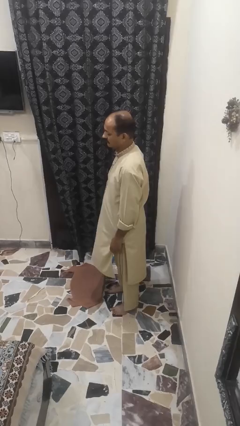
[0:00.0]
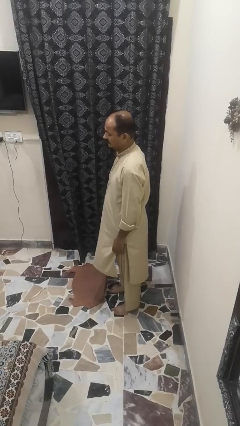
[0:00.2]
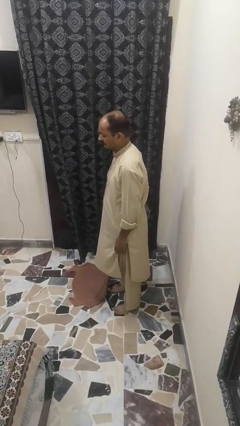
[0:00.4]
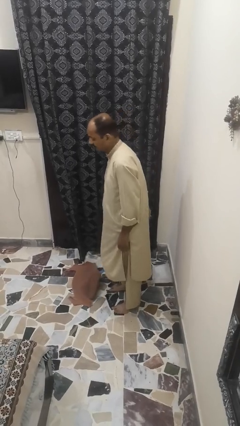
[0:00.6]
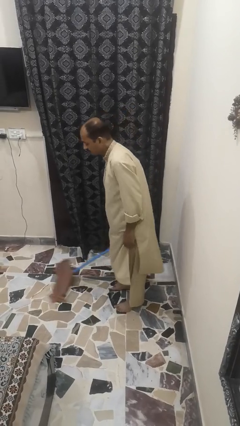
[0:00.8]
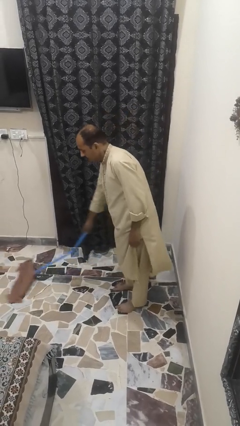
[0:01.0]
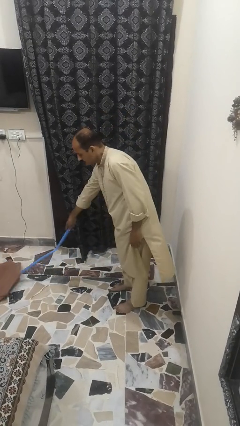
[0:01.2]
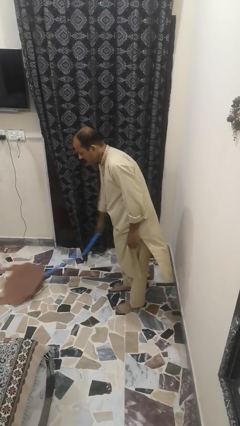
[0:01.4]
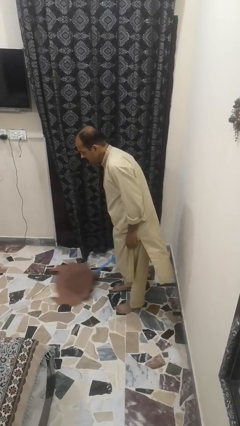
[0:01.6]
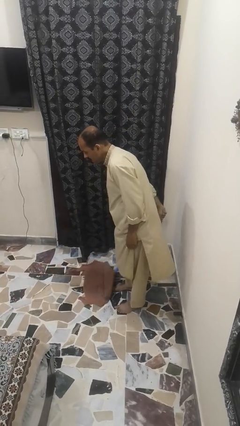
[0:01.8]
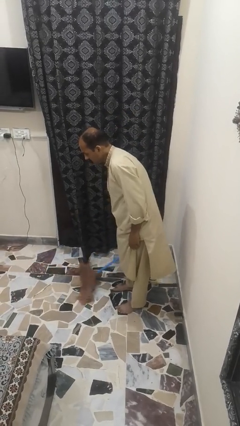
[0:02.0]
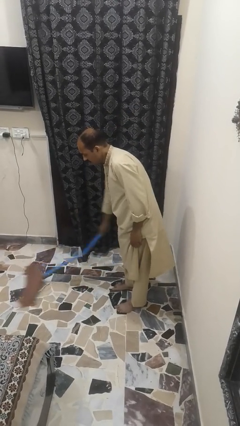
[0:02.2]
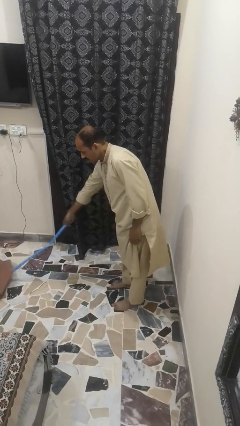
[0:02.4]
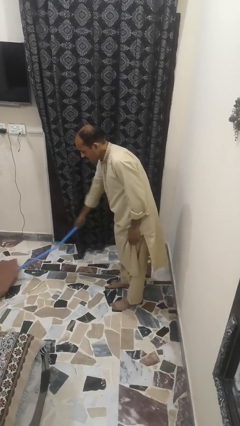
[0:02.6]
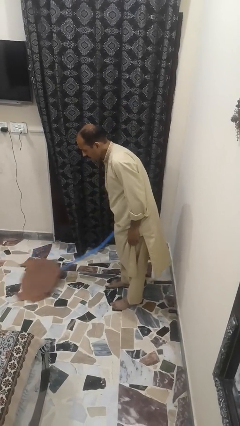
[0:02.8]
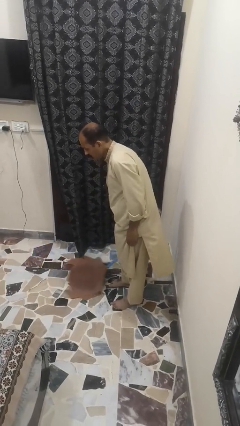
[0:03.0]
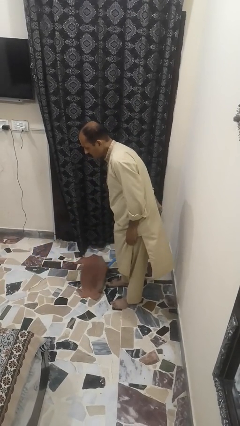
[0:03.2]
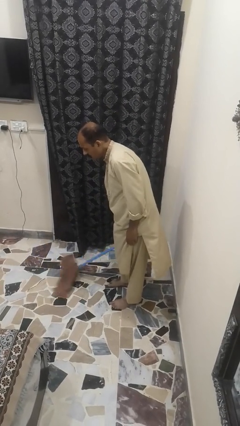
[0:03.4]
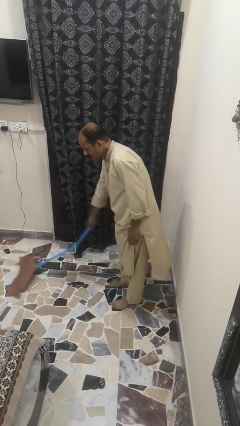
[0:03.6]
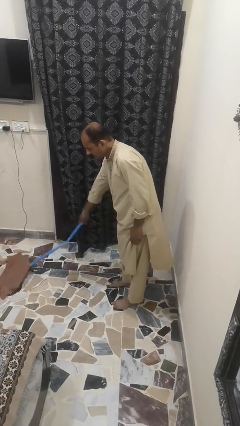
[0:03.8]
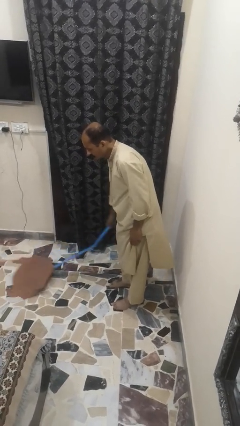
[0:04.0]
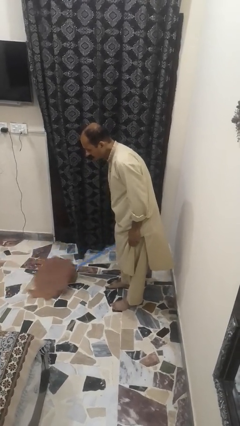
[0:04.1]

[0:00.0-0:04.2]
person mops

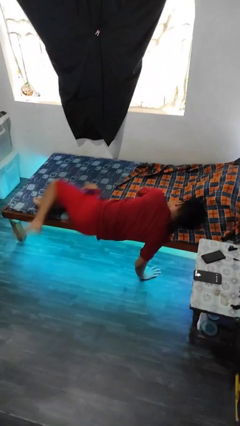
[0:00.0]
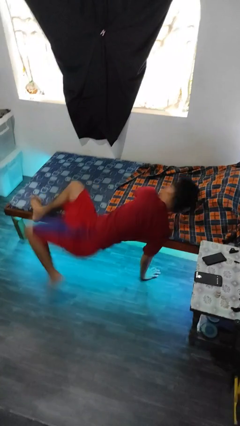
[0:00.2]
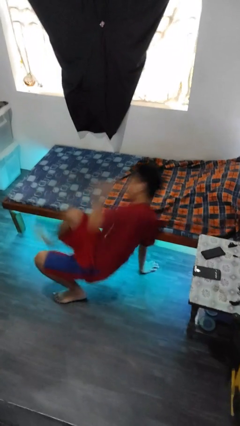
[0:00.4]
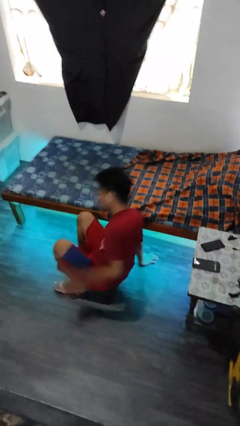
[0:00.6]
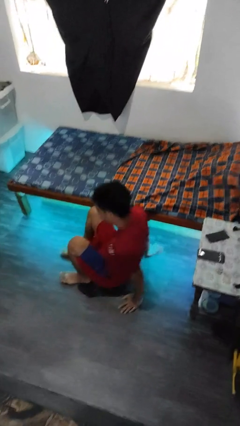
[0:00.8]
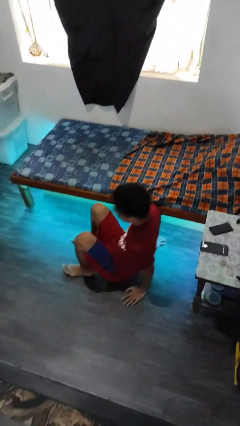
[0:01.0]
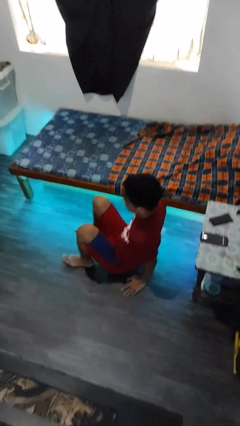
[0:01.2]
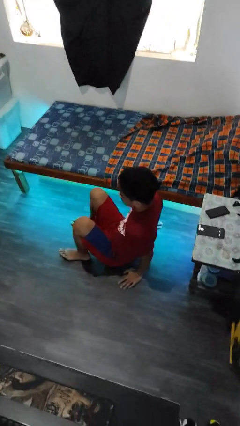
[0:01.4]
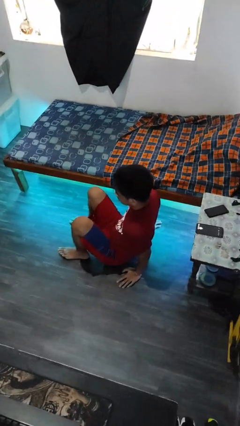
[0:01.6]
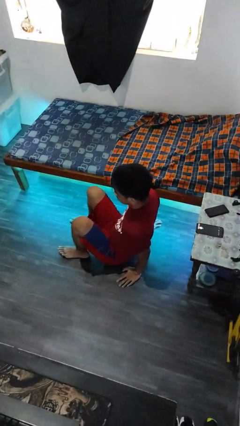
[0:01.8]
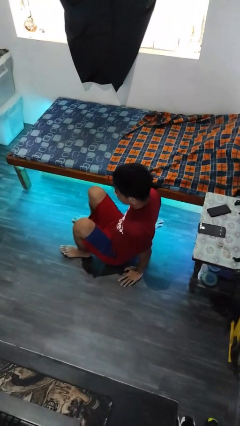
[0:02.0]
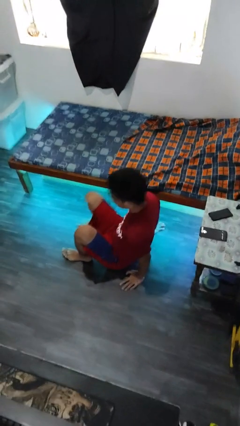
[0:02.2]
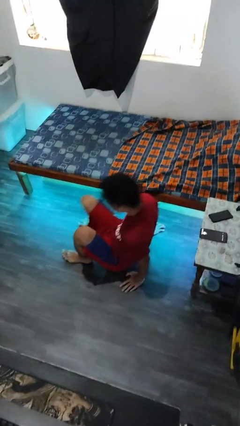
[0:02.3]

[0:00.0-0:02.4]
person falls from bed

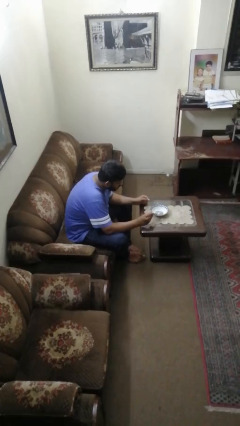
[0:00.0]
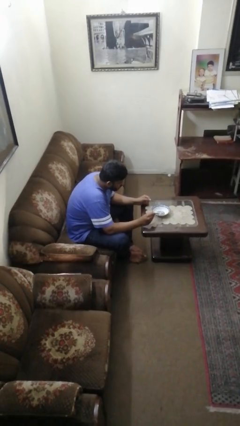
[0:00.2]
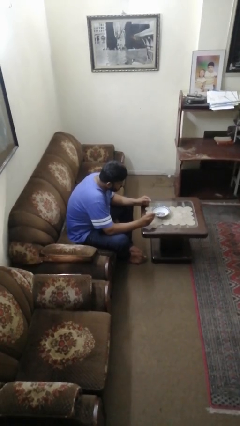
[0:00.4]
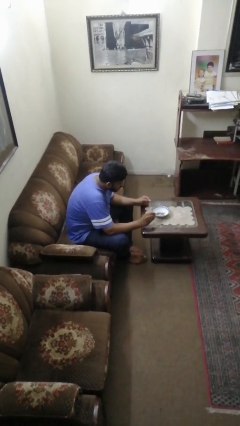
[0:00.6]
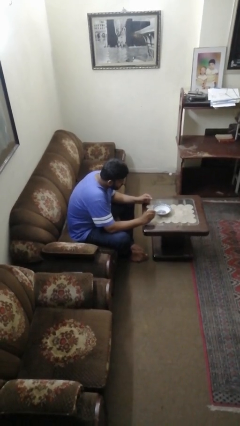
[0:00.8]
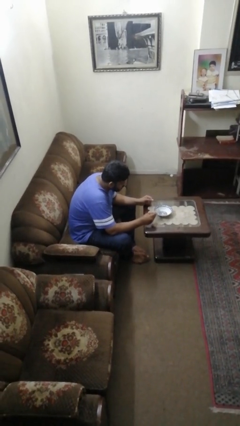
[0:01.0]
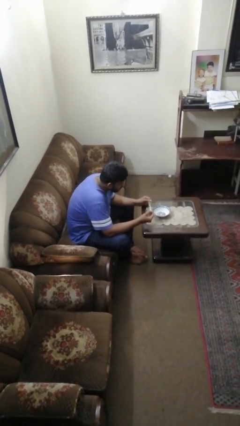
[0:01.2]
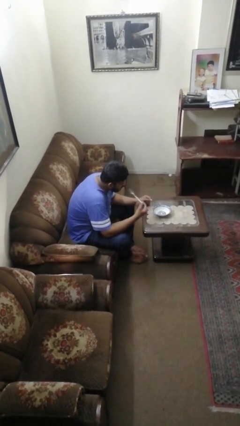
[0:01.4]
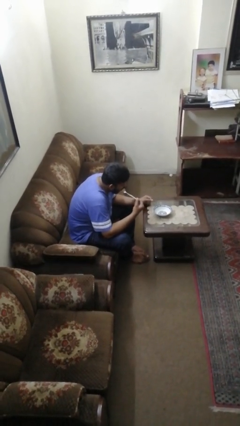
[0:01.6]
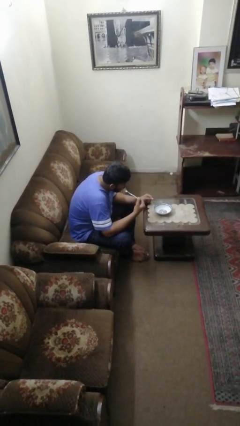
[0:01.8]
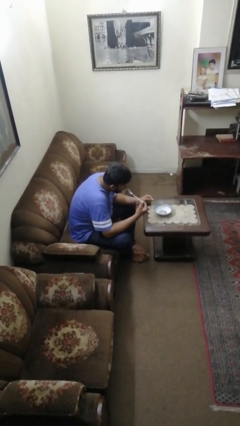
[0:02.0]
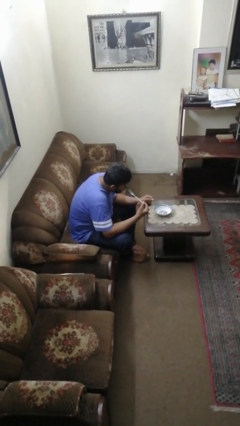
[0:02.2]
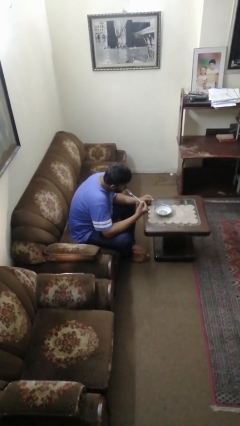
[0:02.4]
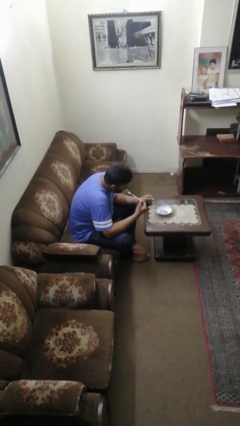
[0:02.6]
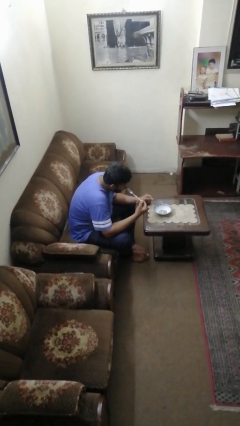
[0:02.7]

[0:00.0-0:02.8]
person eats with utensil

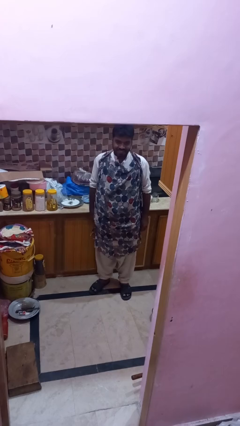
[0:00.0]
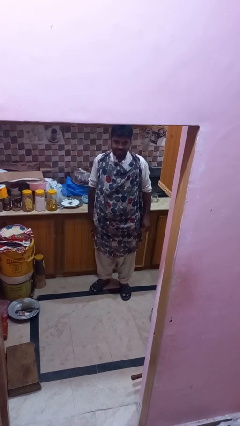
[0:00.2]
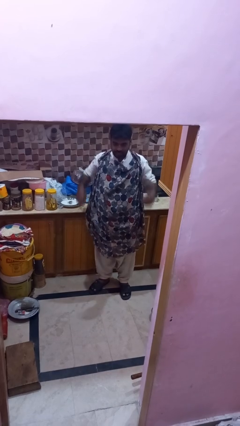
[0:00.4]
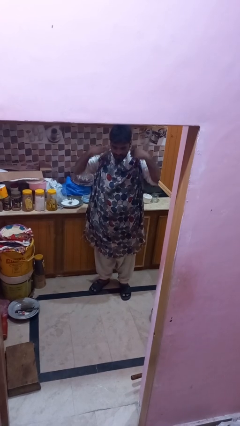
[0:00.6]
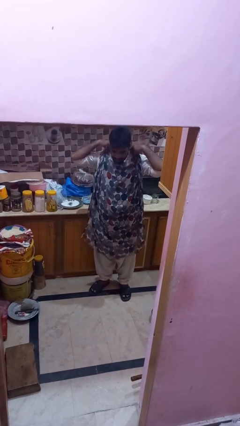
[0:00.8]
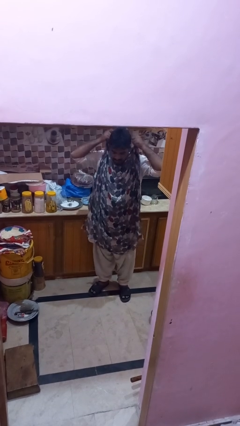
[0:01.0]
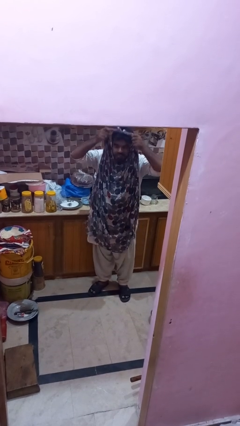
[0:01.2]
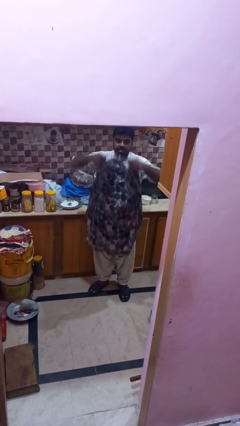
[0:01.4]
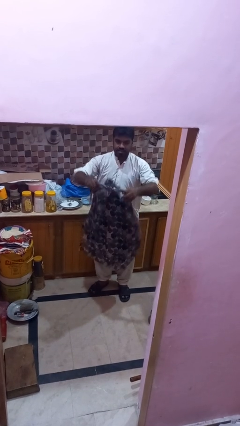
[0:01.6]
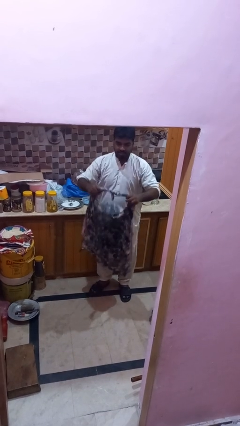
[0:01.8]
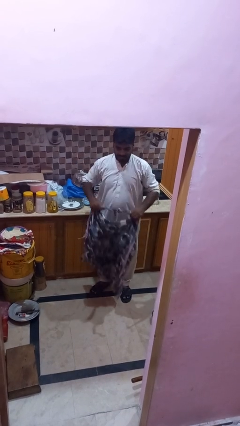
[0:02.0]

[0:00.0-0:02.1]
person takes off apron

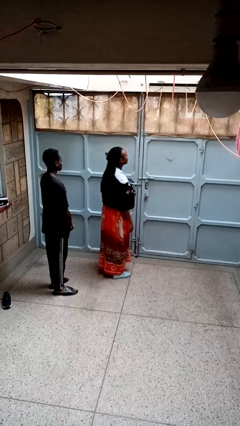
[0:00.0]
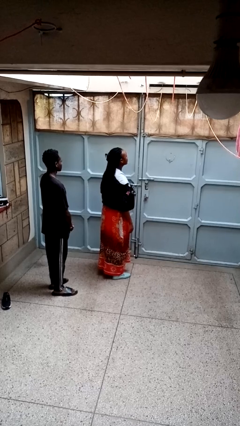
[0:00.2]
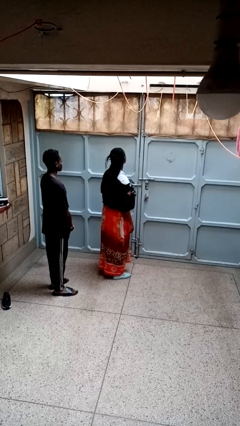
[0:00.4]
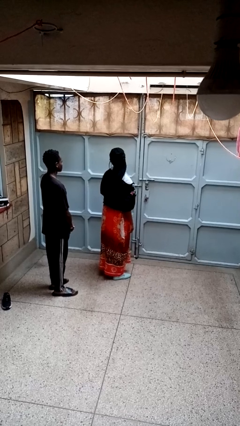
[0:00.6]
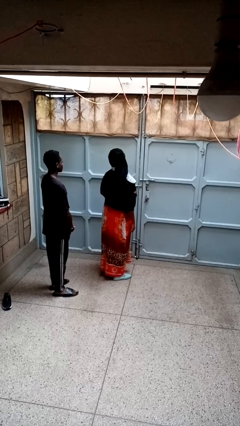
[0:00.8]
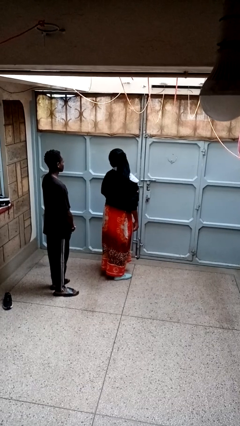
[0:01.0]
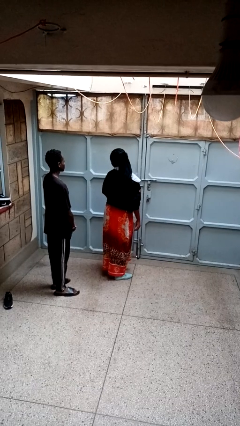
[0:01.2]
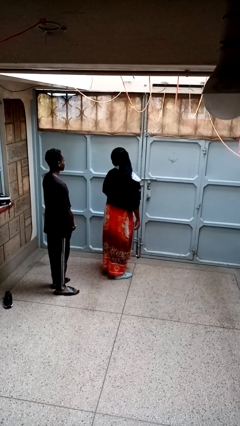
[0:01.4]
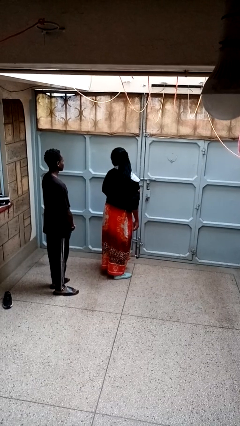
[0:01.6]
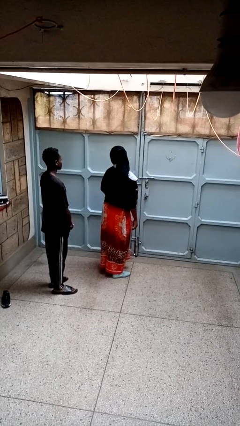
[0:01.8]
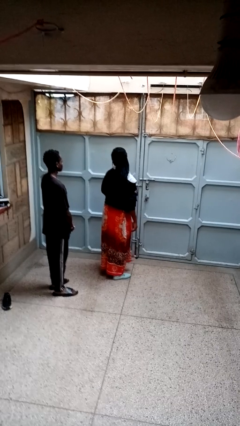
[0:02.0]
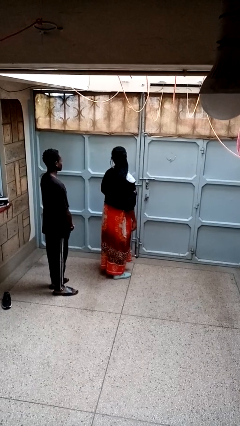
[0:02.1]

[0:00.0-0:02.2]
person looks over shoulder

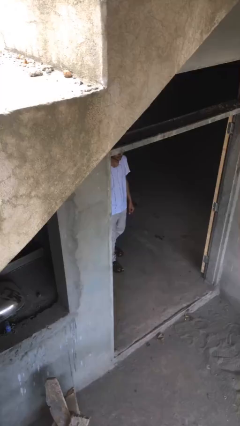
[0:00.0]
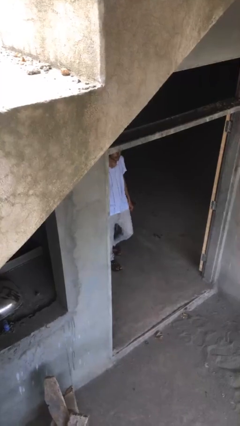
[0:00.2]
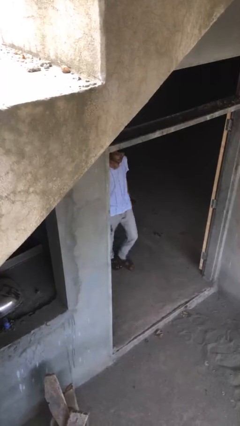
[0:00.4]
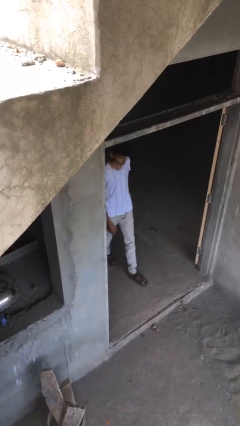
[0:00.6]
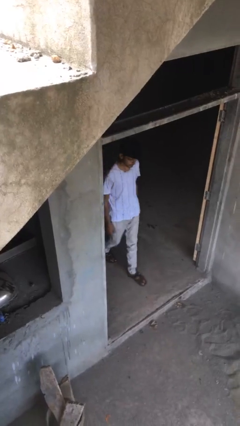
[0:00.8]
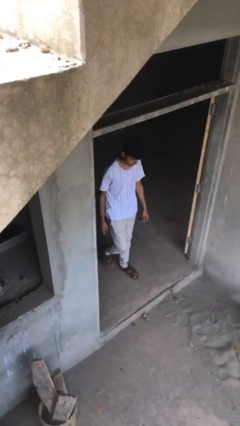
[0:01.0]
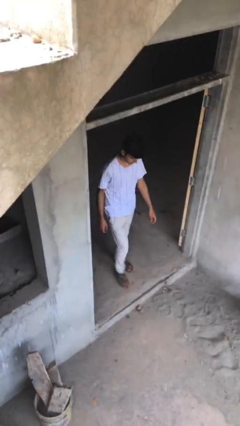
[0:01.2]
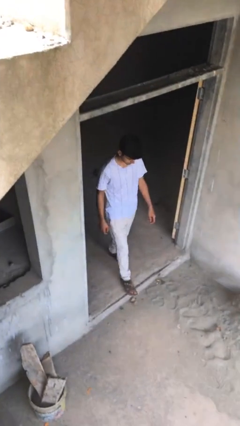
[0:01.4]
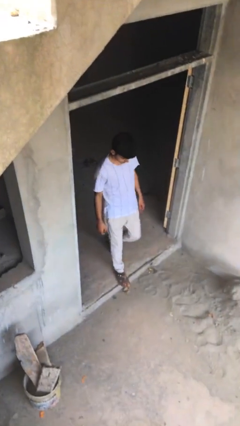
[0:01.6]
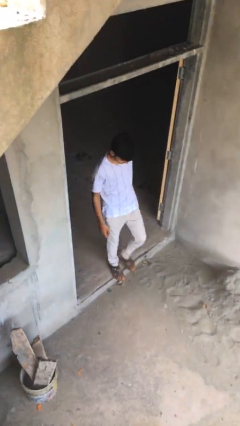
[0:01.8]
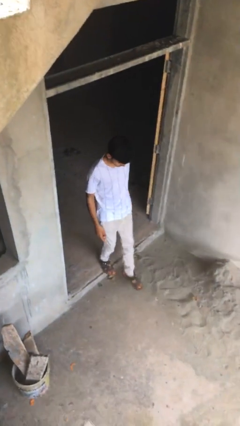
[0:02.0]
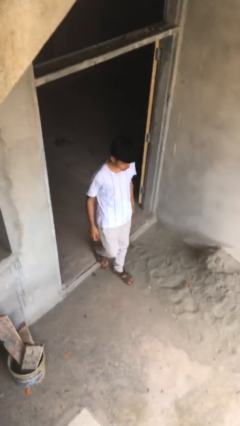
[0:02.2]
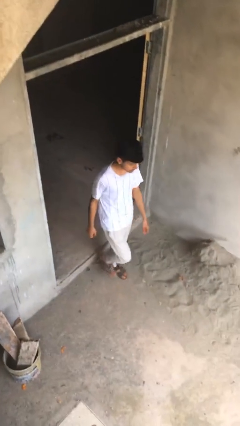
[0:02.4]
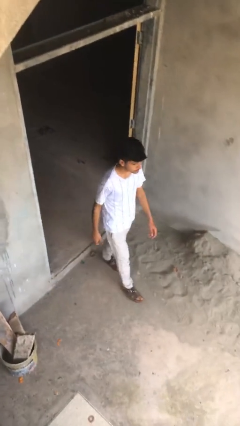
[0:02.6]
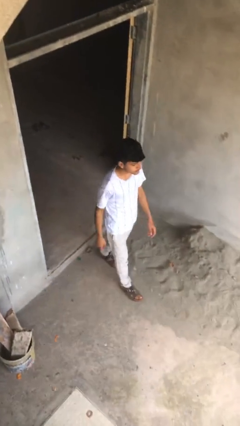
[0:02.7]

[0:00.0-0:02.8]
person enters scene through structure

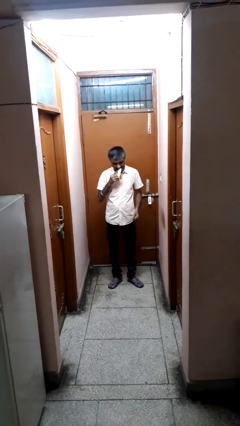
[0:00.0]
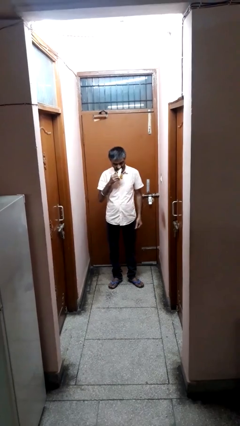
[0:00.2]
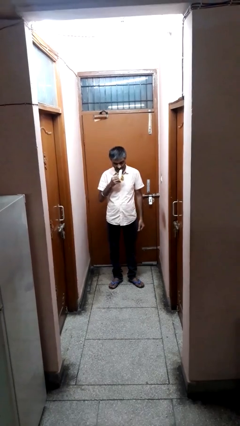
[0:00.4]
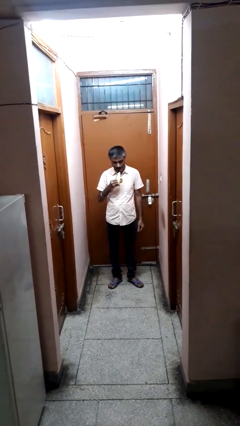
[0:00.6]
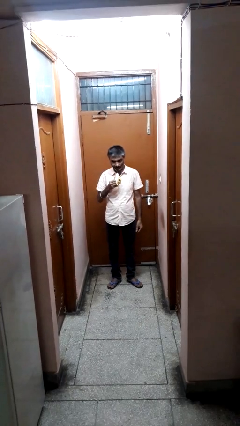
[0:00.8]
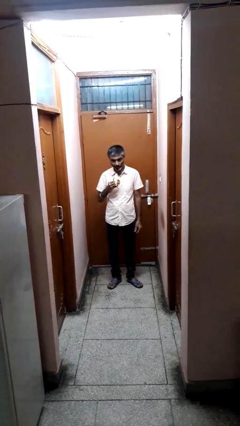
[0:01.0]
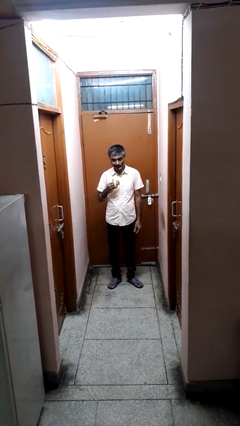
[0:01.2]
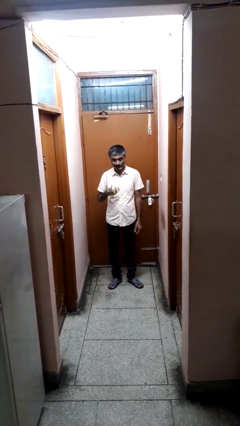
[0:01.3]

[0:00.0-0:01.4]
person eats banana
